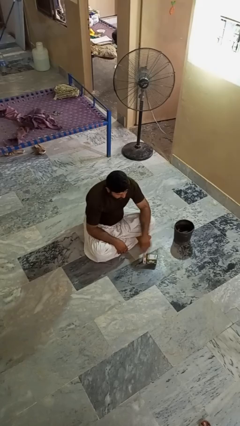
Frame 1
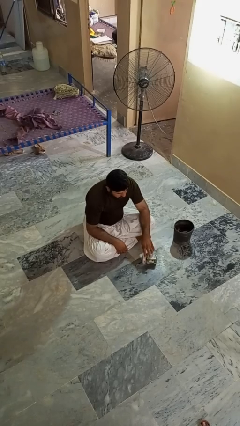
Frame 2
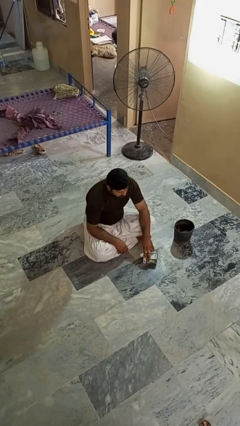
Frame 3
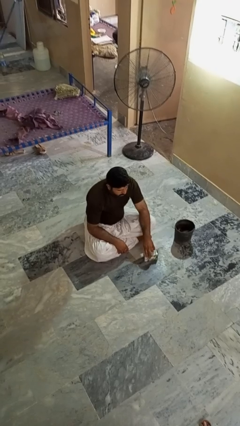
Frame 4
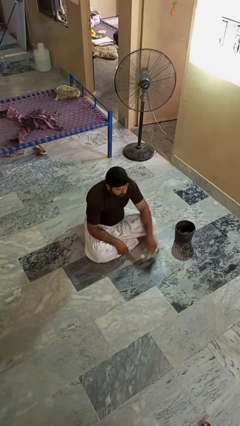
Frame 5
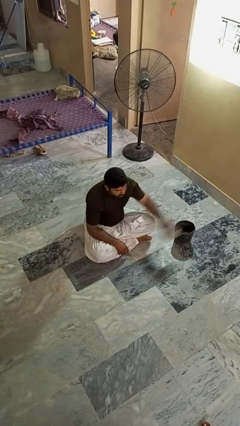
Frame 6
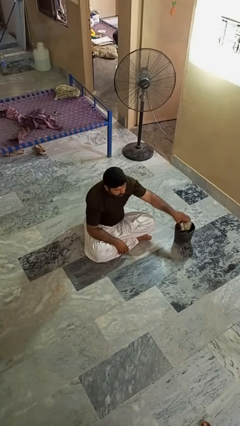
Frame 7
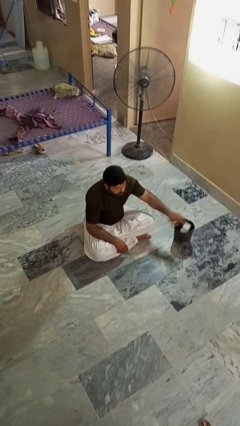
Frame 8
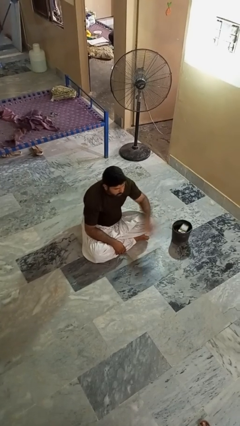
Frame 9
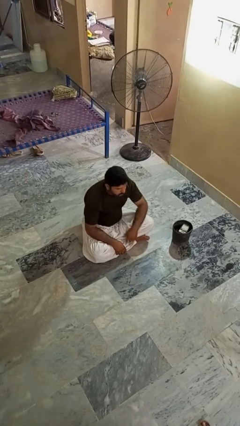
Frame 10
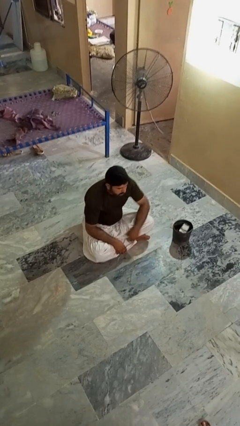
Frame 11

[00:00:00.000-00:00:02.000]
person puts object into basket

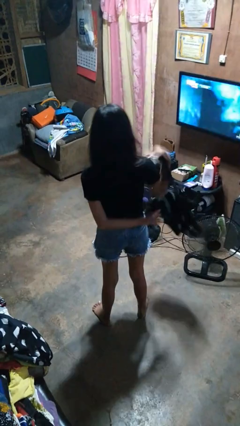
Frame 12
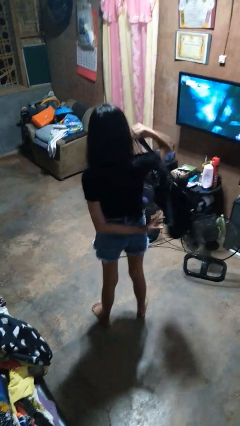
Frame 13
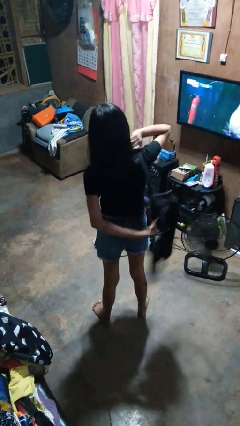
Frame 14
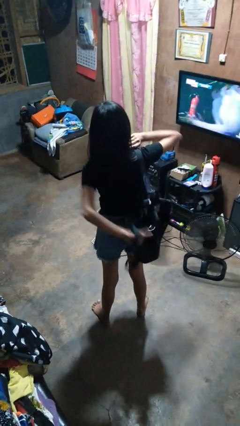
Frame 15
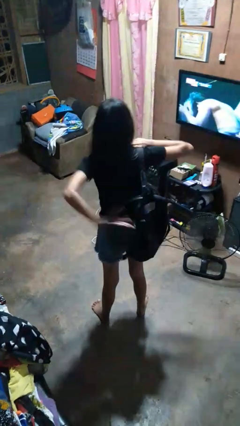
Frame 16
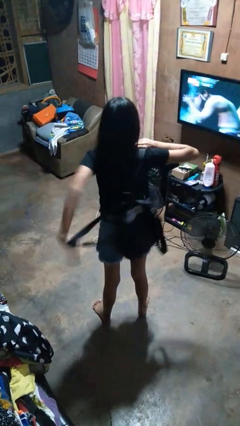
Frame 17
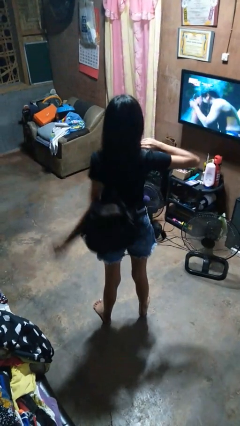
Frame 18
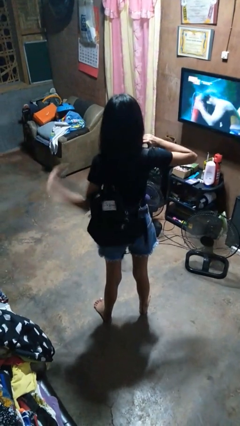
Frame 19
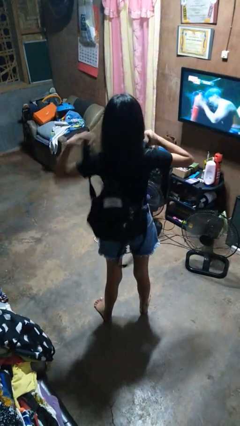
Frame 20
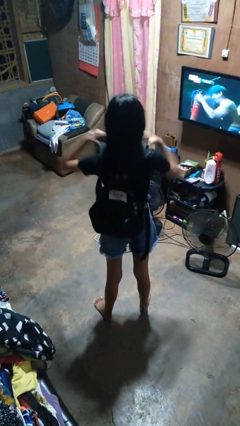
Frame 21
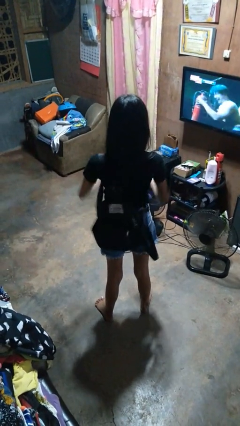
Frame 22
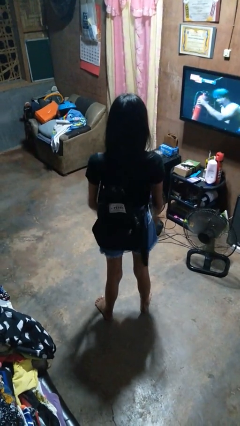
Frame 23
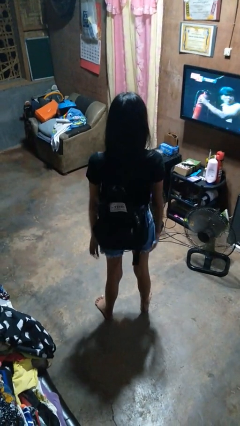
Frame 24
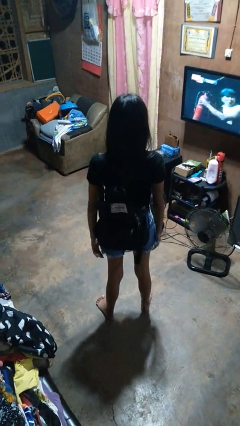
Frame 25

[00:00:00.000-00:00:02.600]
person puts on backpack

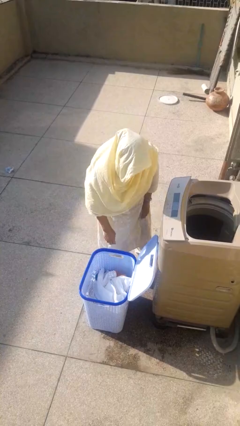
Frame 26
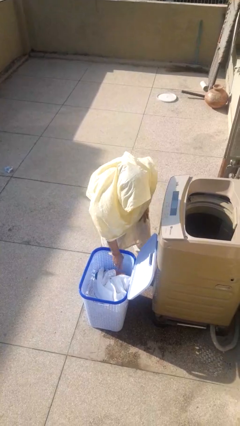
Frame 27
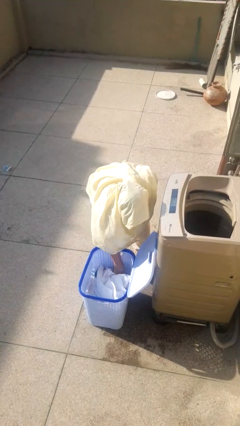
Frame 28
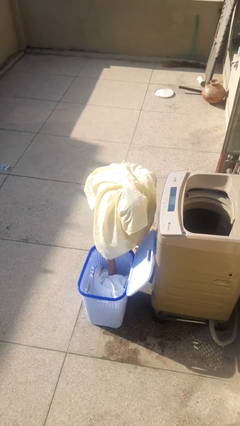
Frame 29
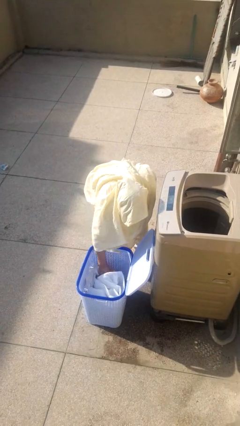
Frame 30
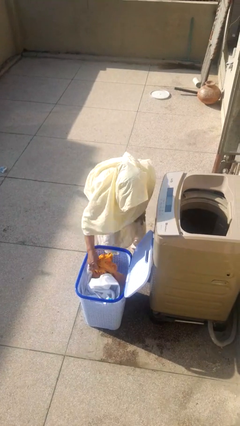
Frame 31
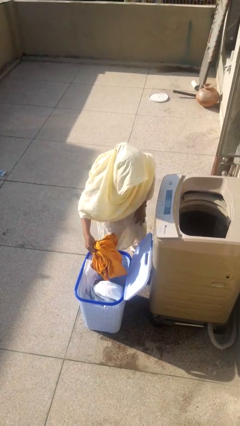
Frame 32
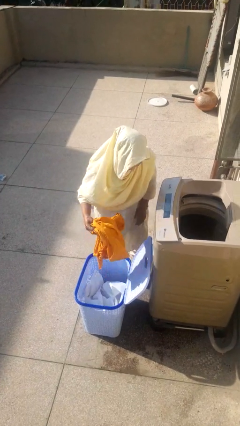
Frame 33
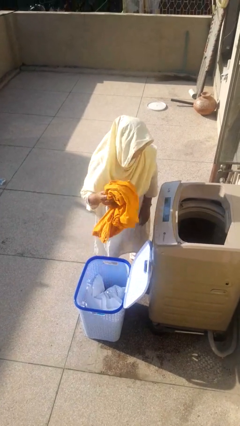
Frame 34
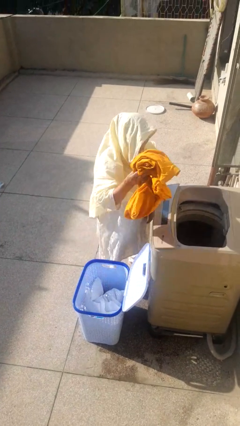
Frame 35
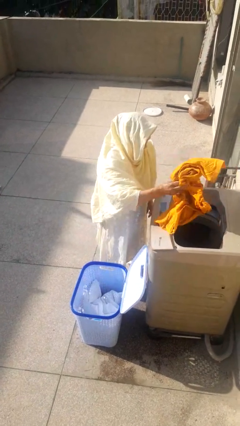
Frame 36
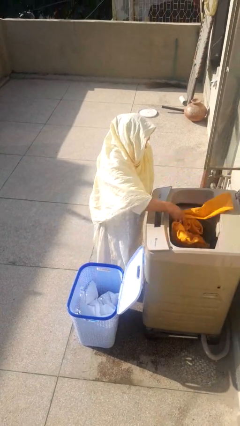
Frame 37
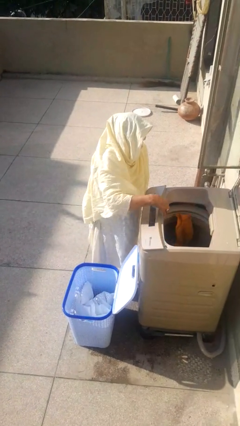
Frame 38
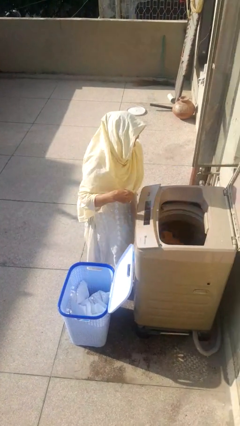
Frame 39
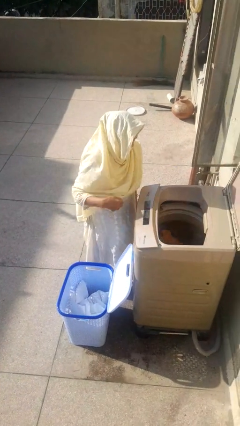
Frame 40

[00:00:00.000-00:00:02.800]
person loads clotheswasher

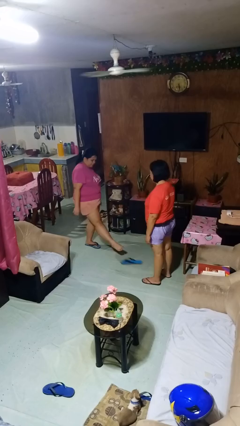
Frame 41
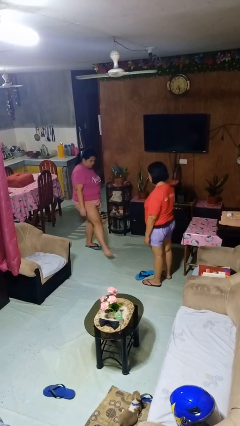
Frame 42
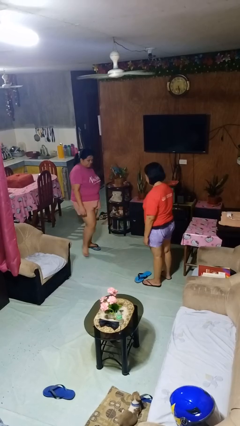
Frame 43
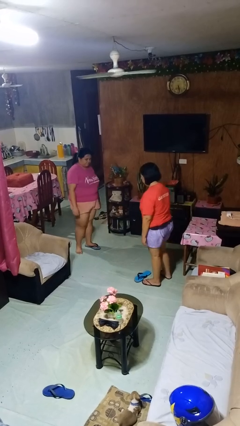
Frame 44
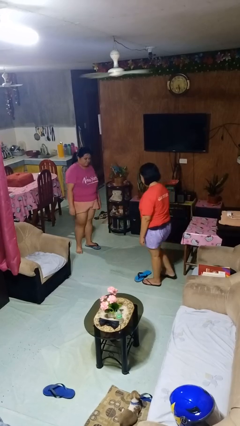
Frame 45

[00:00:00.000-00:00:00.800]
person kicks object to person

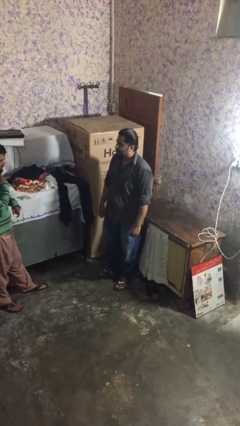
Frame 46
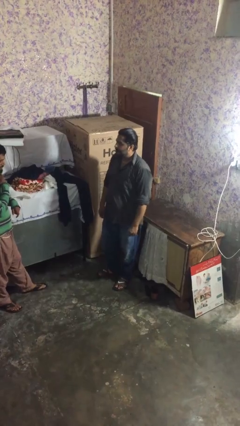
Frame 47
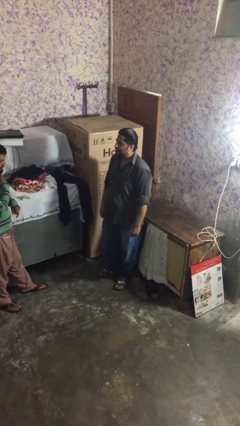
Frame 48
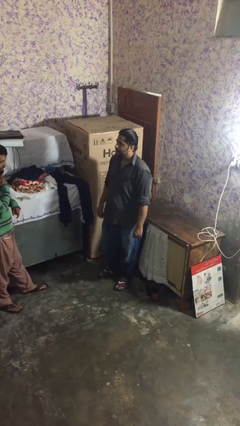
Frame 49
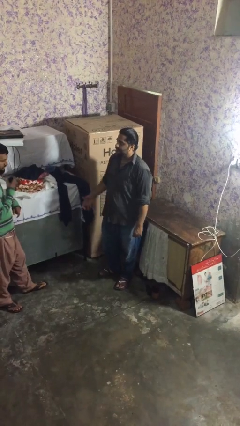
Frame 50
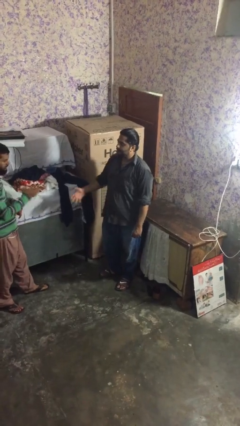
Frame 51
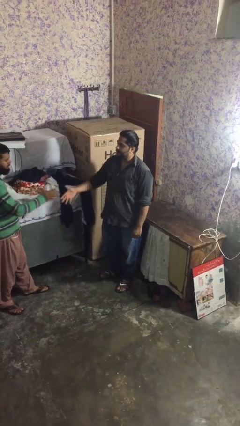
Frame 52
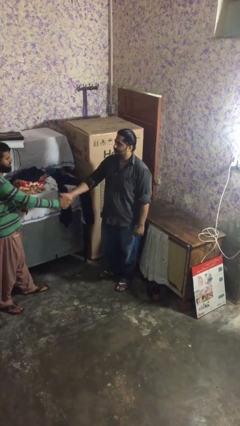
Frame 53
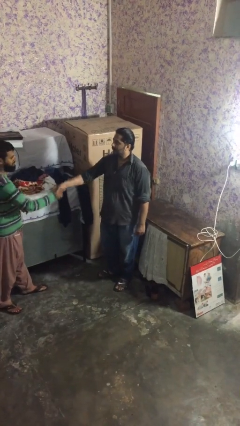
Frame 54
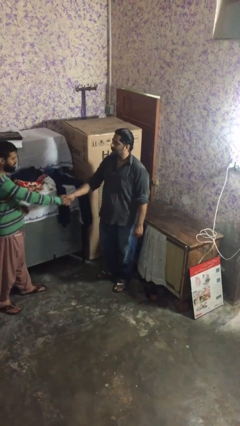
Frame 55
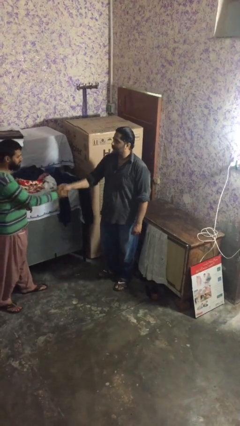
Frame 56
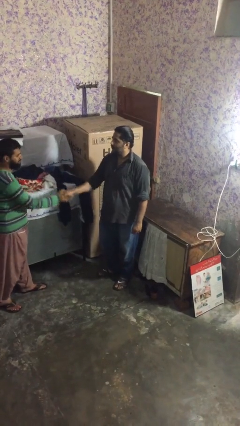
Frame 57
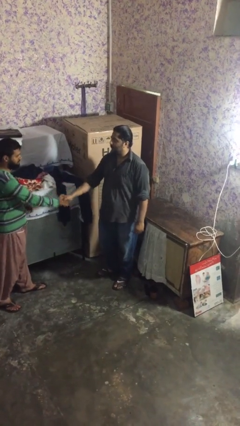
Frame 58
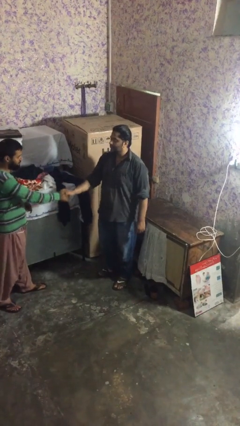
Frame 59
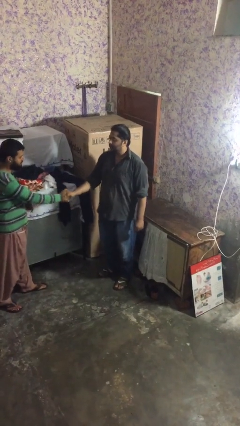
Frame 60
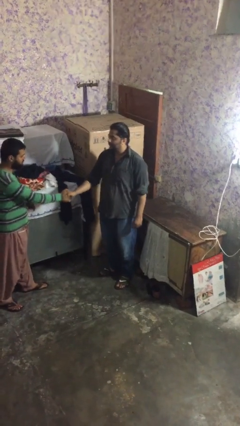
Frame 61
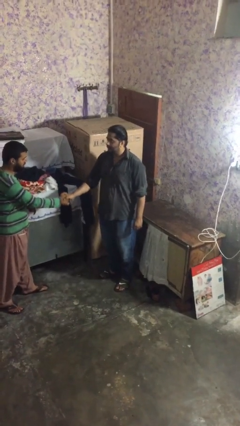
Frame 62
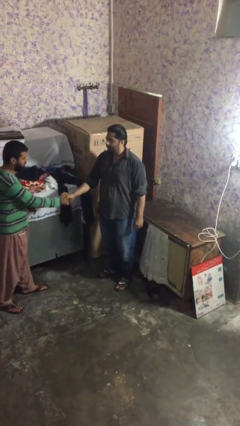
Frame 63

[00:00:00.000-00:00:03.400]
person shakes hand

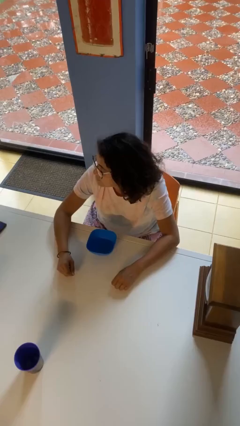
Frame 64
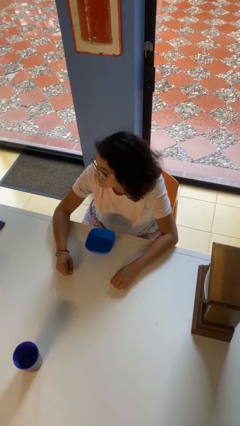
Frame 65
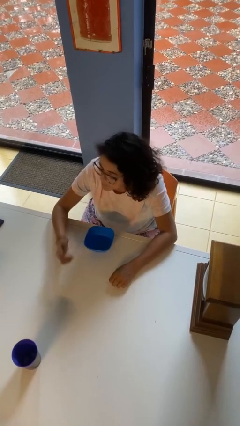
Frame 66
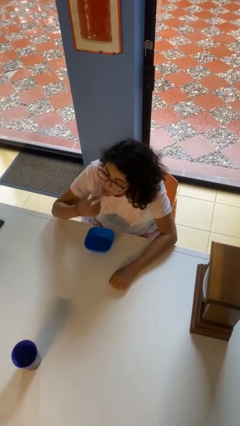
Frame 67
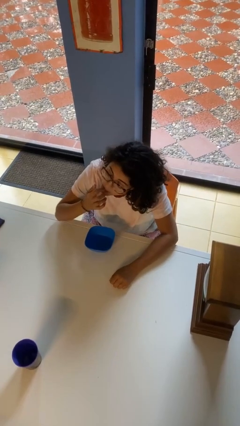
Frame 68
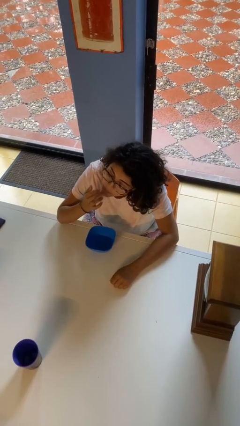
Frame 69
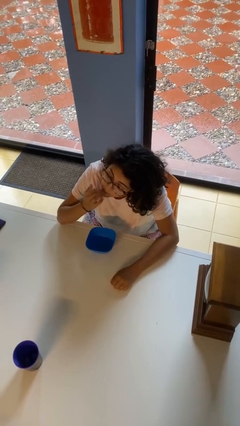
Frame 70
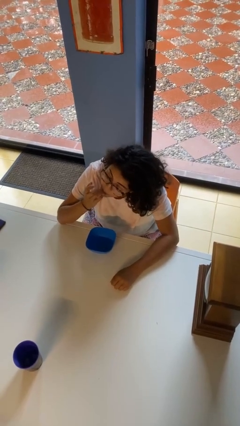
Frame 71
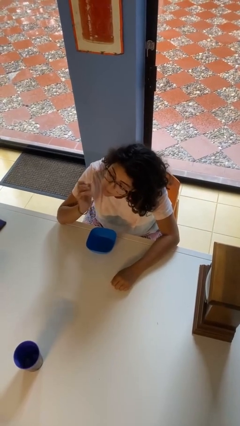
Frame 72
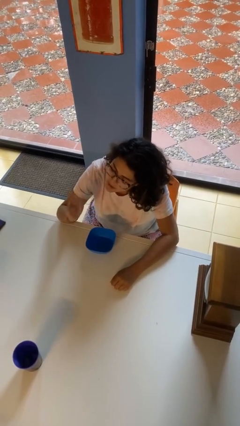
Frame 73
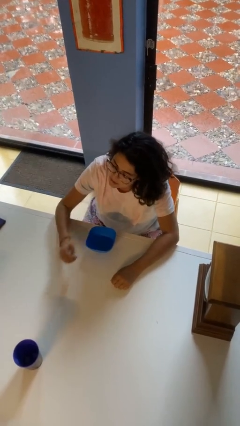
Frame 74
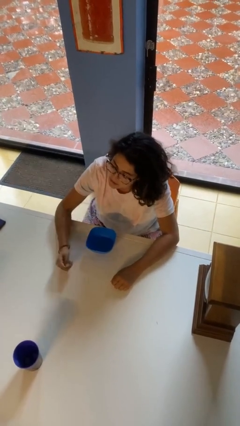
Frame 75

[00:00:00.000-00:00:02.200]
person licks fingers

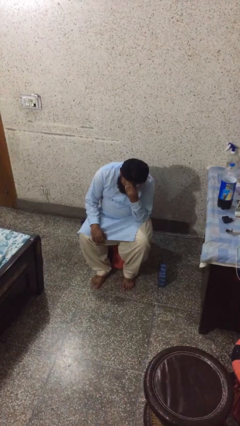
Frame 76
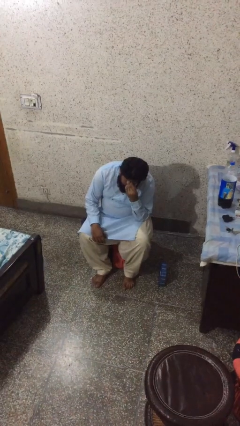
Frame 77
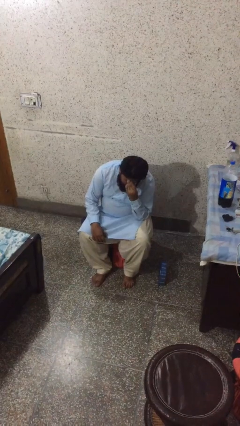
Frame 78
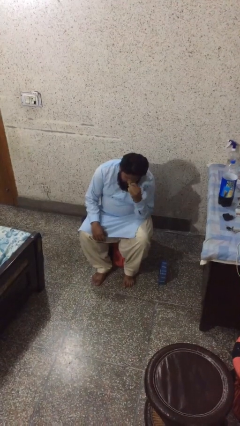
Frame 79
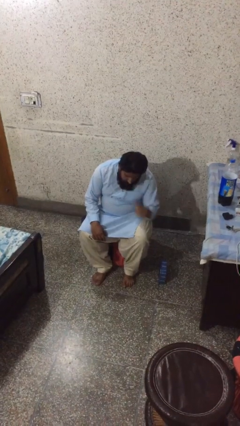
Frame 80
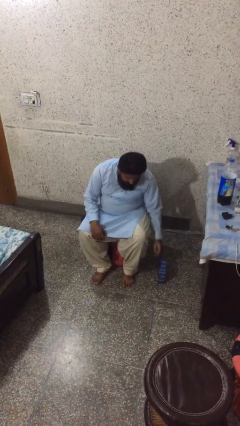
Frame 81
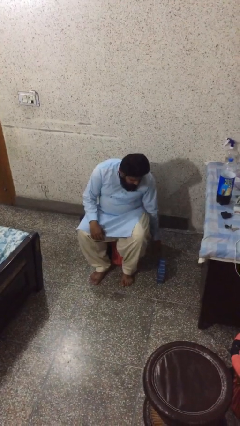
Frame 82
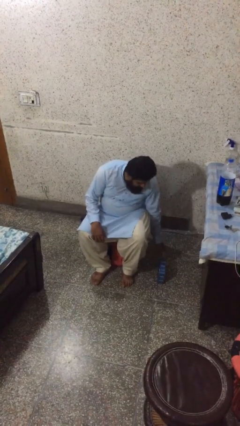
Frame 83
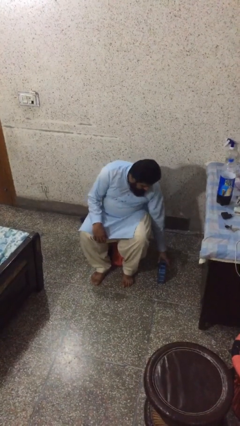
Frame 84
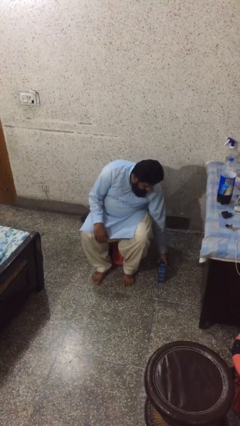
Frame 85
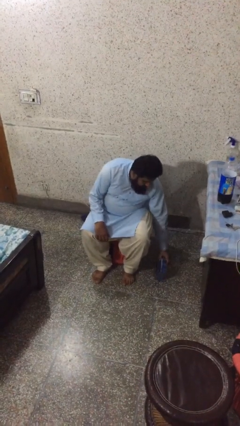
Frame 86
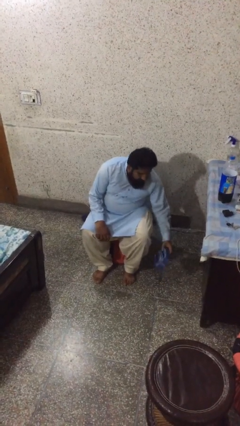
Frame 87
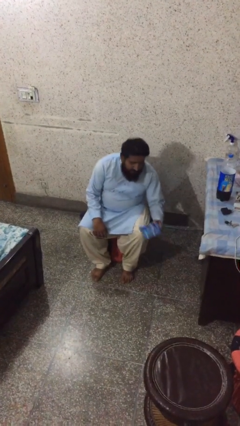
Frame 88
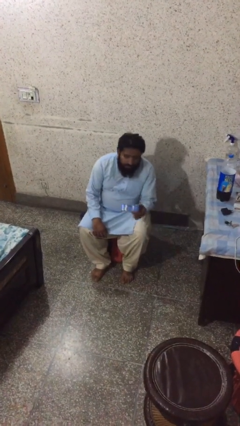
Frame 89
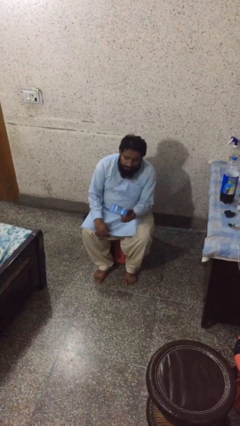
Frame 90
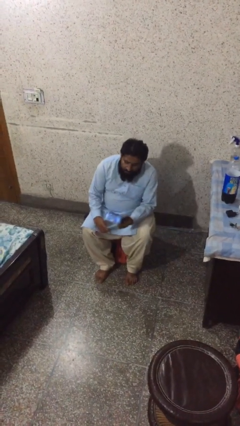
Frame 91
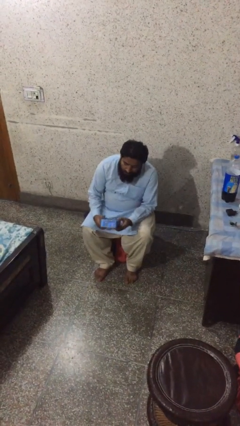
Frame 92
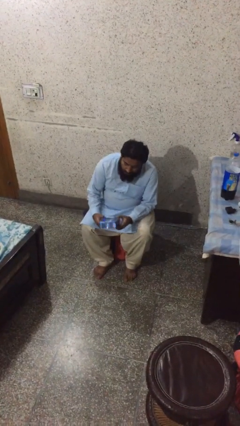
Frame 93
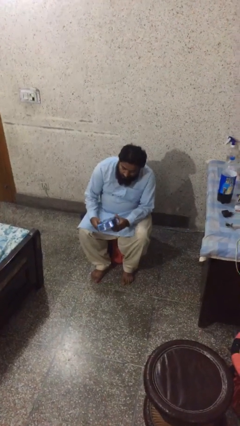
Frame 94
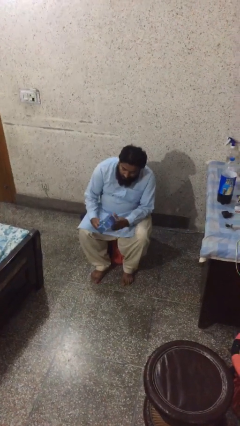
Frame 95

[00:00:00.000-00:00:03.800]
person picks up object from floor
